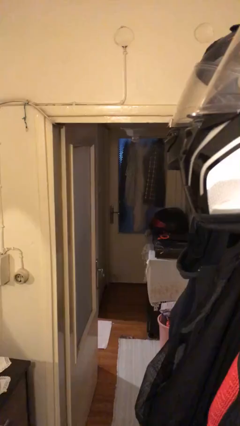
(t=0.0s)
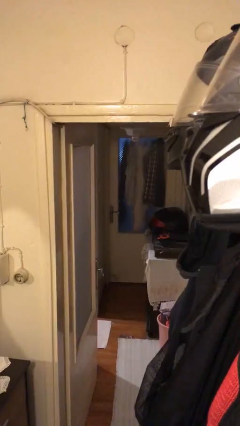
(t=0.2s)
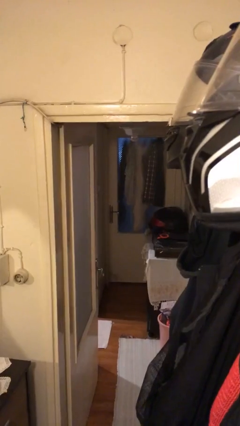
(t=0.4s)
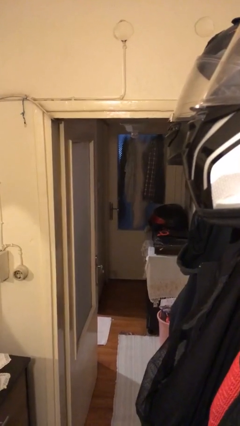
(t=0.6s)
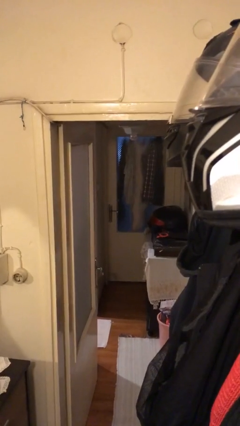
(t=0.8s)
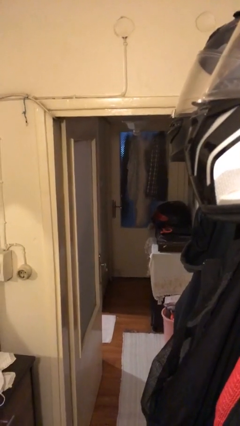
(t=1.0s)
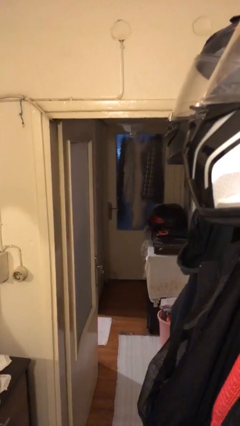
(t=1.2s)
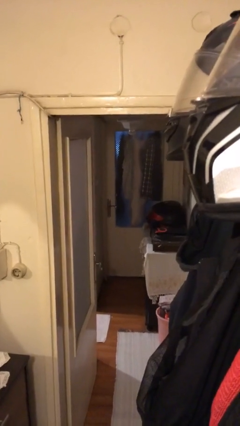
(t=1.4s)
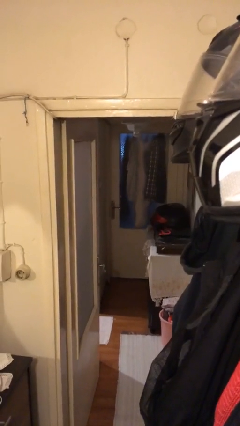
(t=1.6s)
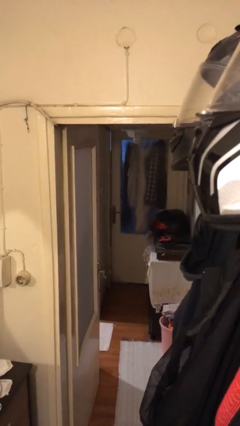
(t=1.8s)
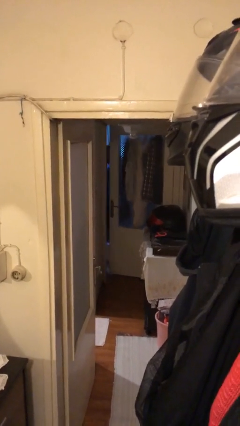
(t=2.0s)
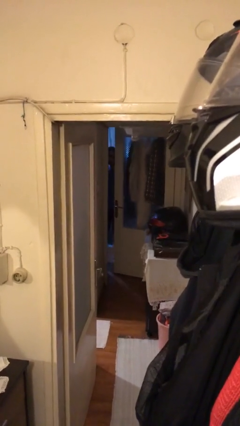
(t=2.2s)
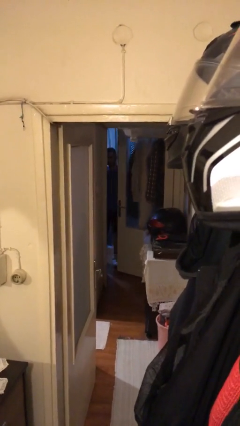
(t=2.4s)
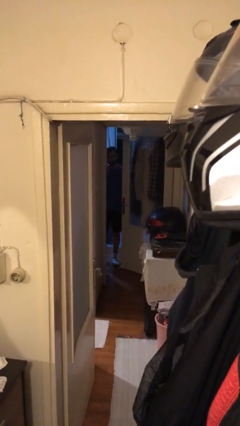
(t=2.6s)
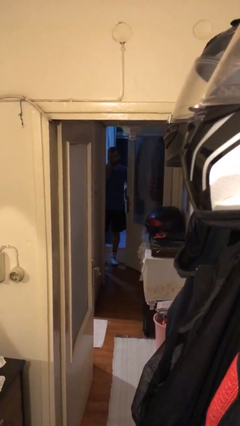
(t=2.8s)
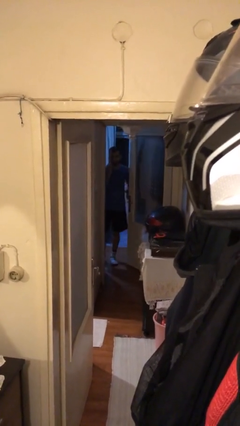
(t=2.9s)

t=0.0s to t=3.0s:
person opens facility door

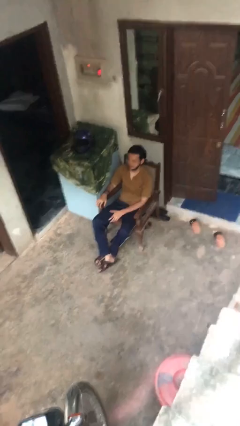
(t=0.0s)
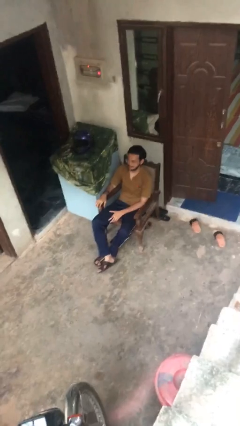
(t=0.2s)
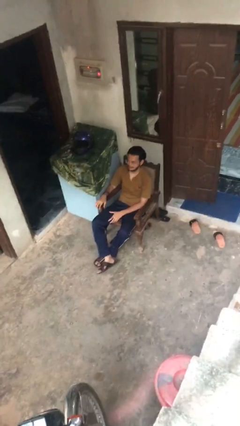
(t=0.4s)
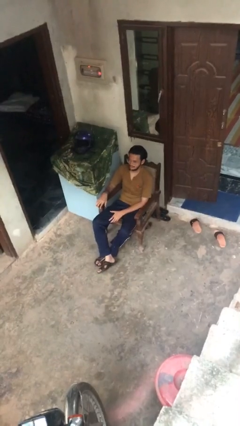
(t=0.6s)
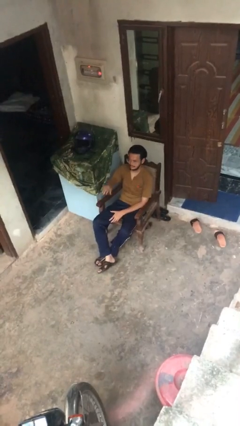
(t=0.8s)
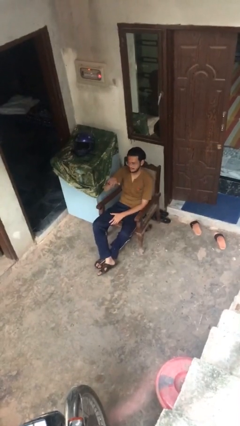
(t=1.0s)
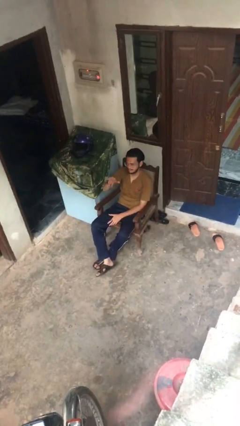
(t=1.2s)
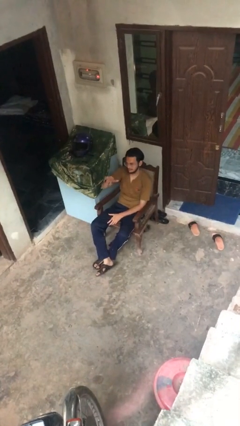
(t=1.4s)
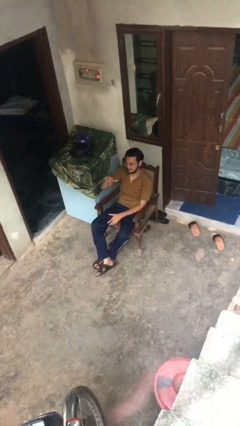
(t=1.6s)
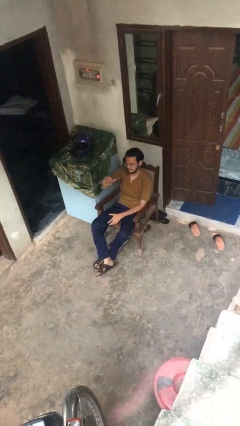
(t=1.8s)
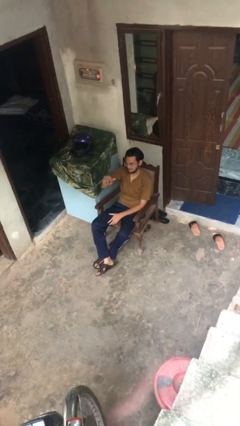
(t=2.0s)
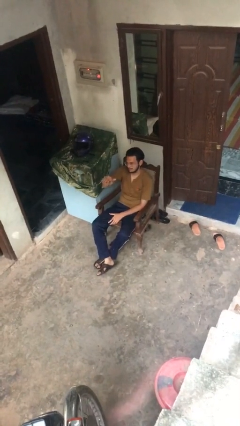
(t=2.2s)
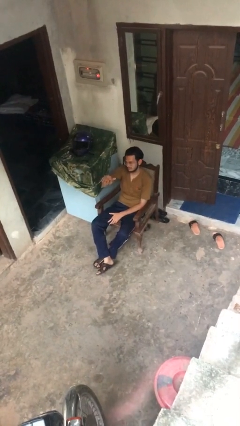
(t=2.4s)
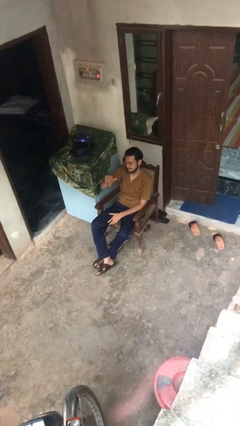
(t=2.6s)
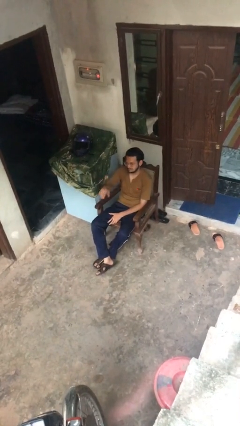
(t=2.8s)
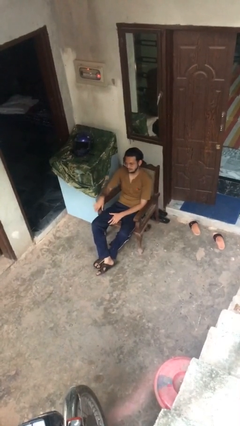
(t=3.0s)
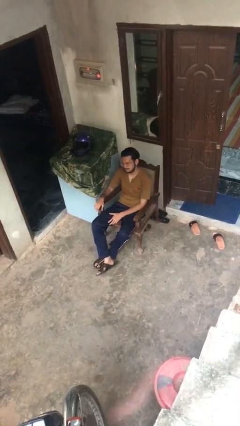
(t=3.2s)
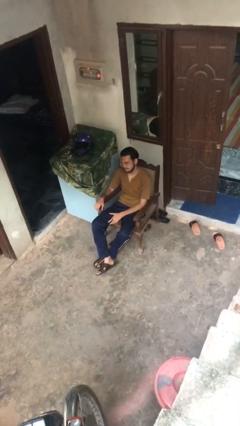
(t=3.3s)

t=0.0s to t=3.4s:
person gestures come here

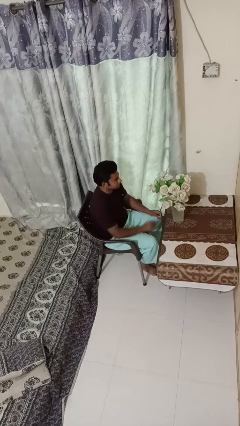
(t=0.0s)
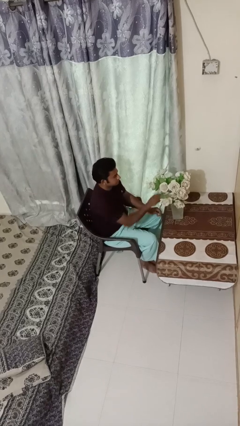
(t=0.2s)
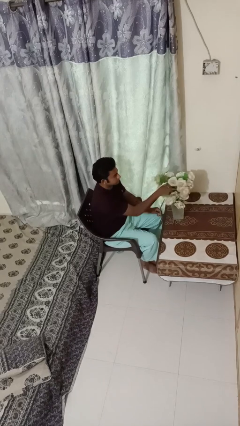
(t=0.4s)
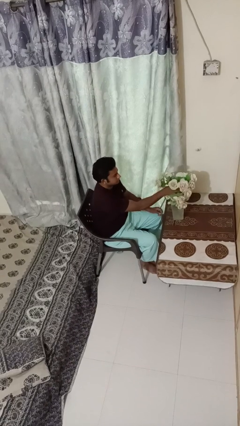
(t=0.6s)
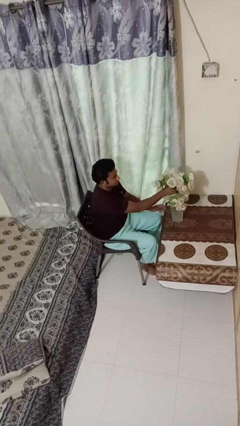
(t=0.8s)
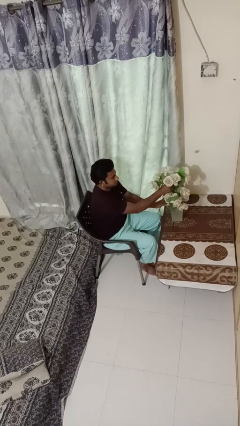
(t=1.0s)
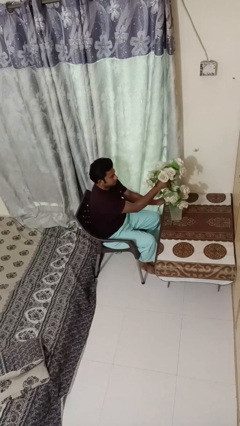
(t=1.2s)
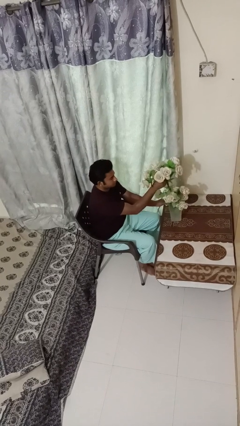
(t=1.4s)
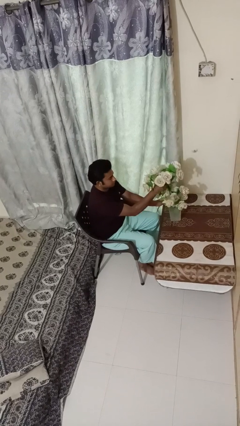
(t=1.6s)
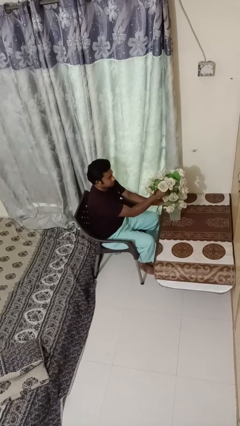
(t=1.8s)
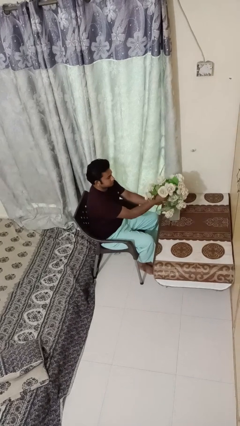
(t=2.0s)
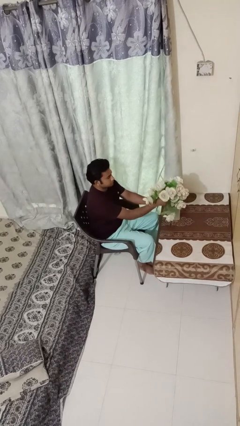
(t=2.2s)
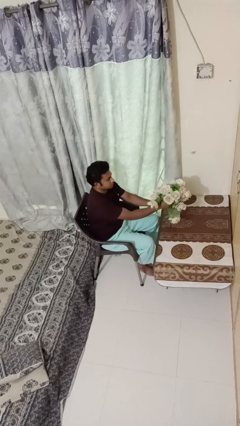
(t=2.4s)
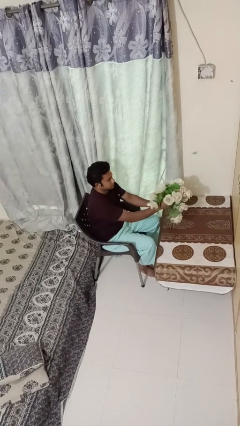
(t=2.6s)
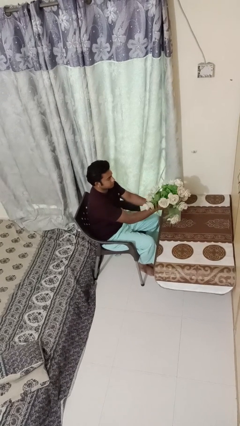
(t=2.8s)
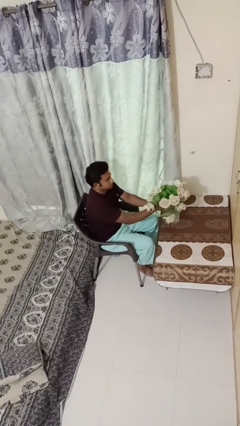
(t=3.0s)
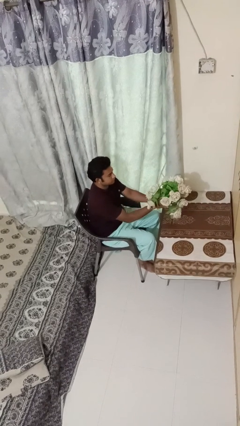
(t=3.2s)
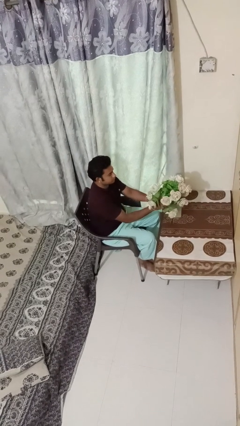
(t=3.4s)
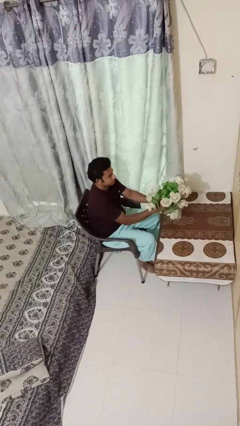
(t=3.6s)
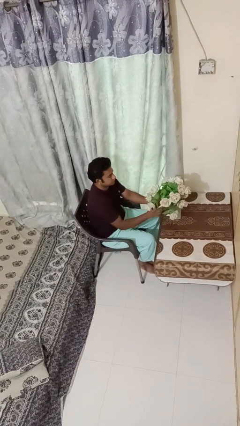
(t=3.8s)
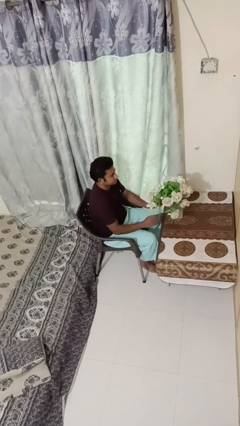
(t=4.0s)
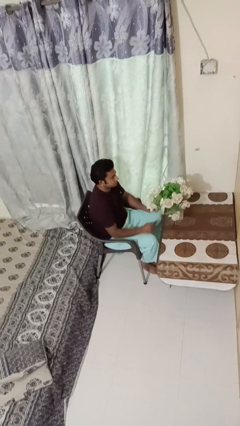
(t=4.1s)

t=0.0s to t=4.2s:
person arranges flowers in vase

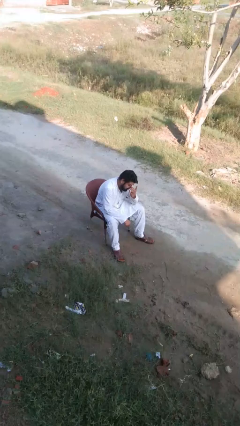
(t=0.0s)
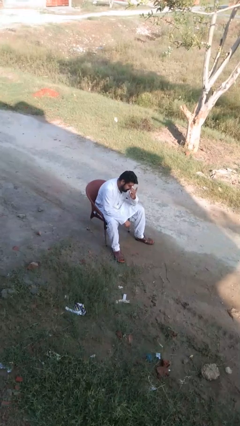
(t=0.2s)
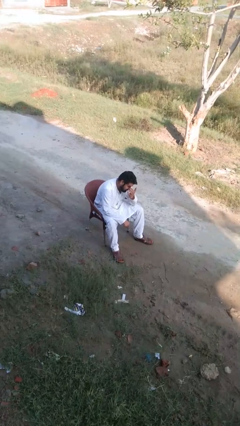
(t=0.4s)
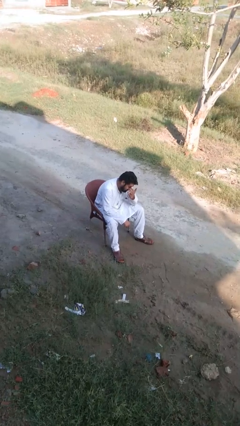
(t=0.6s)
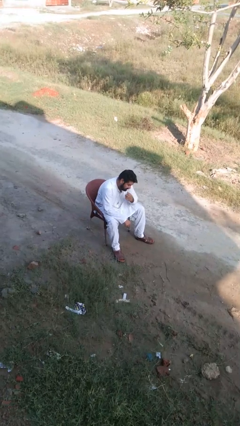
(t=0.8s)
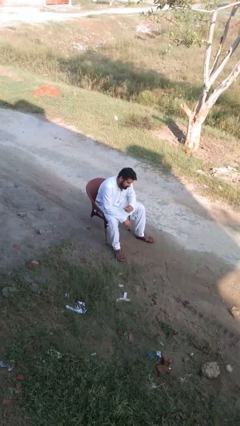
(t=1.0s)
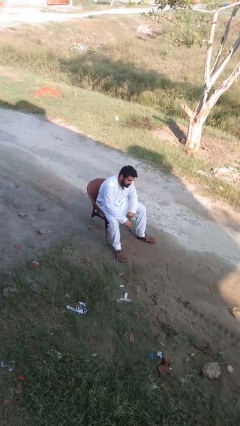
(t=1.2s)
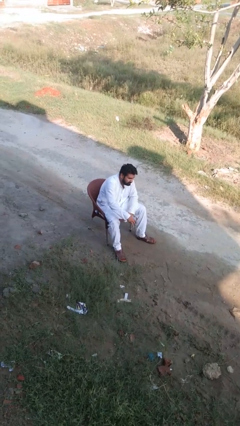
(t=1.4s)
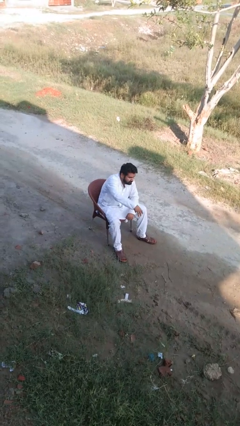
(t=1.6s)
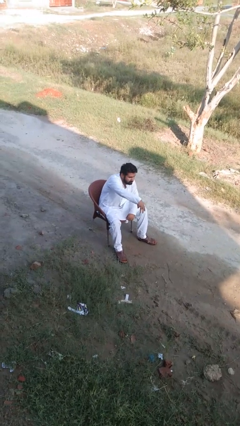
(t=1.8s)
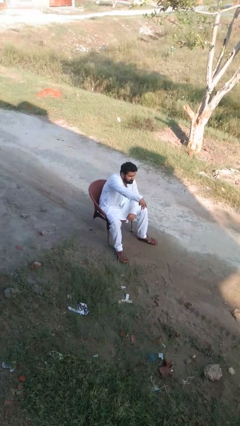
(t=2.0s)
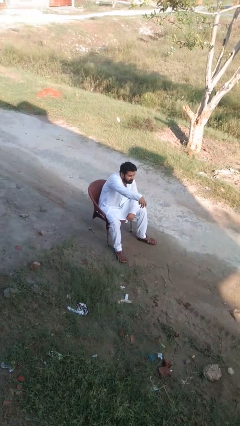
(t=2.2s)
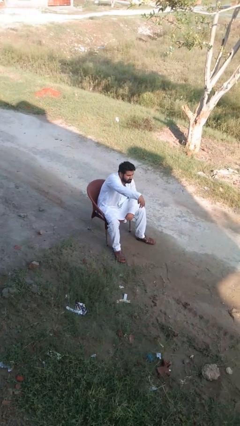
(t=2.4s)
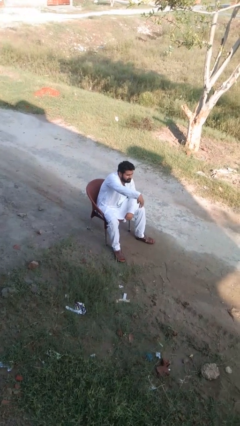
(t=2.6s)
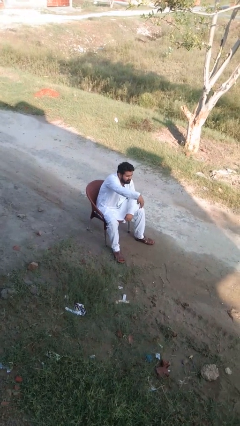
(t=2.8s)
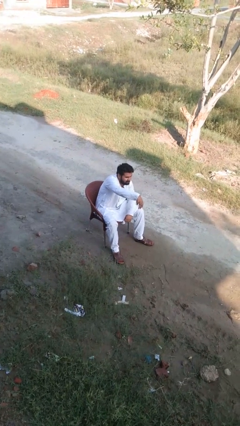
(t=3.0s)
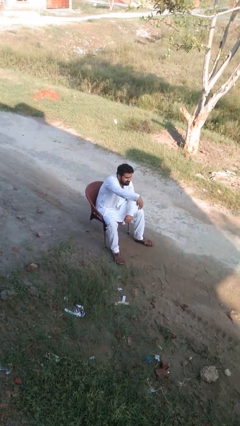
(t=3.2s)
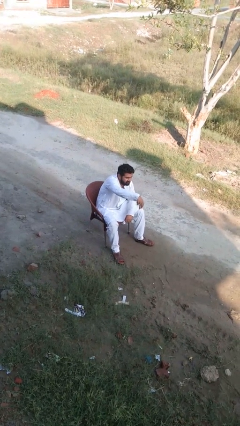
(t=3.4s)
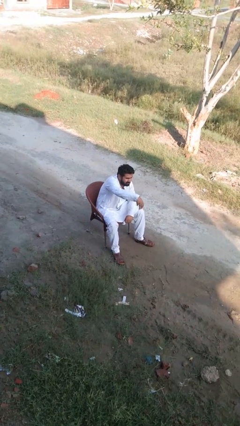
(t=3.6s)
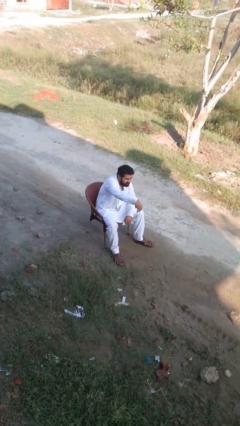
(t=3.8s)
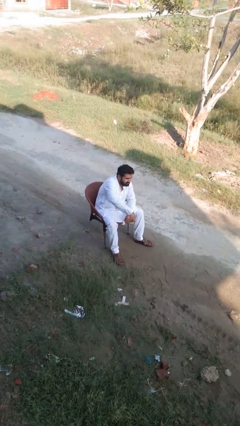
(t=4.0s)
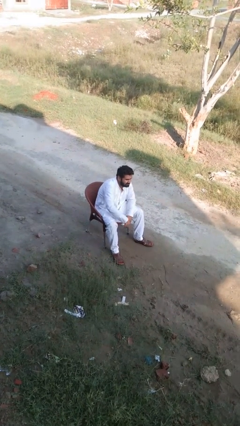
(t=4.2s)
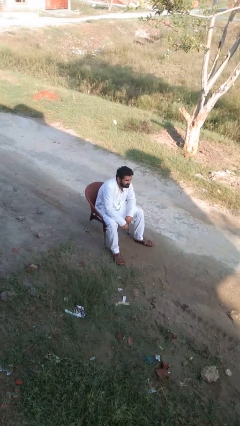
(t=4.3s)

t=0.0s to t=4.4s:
person gestures hang loose

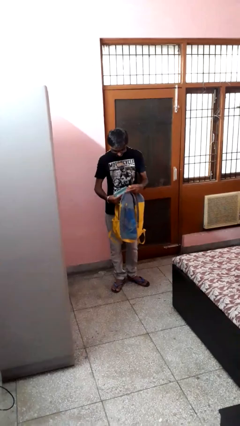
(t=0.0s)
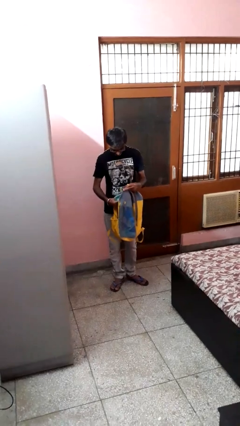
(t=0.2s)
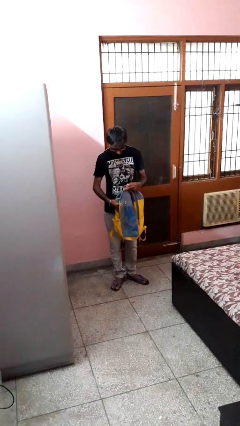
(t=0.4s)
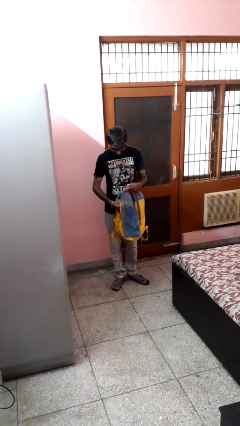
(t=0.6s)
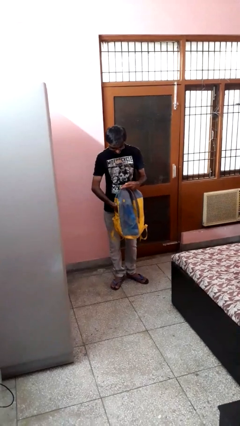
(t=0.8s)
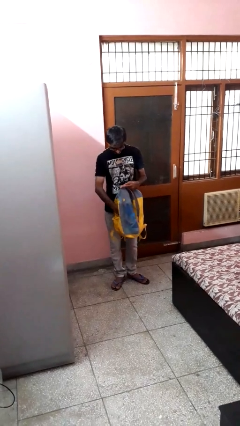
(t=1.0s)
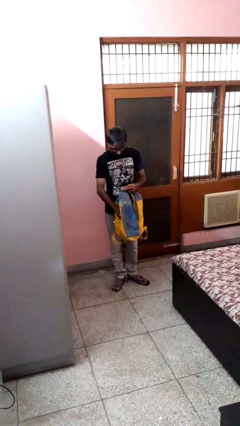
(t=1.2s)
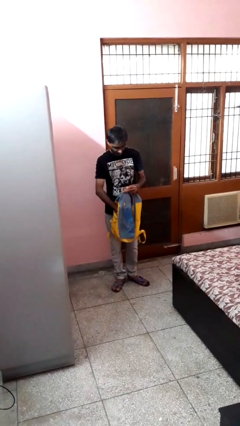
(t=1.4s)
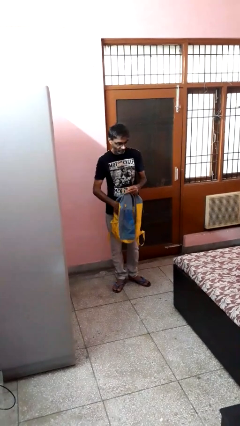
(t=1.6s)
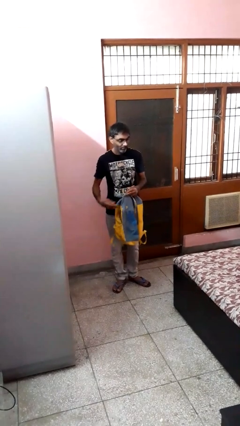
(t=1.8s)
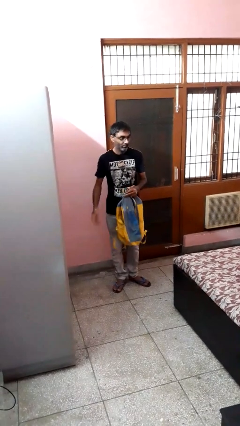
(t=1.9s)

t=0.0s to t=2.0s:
person puts object into backpack
